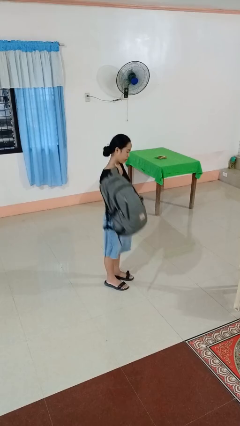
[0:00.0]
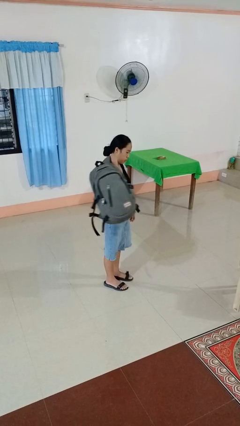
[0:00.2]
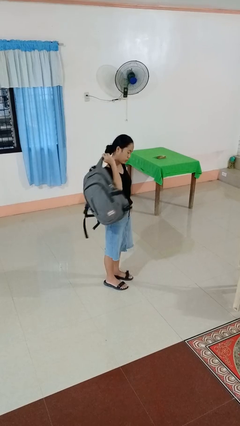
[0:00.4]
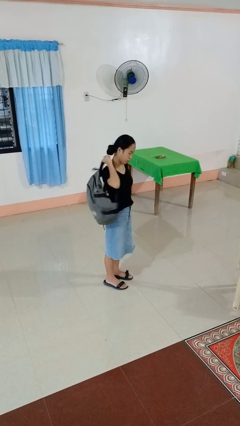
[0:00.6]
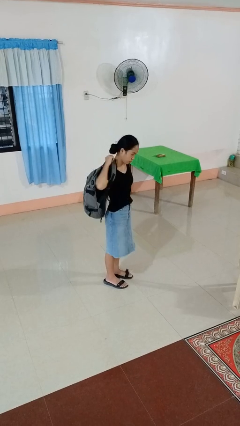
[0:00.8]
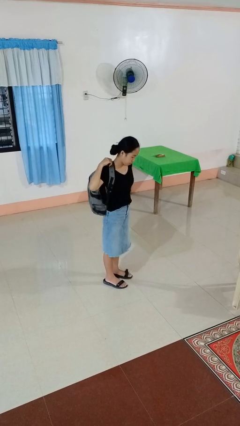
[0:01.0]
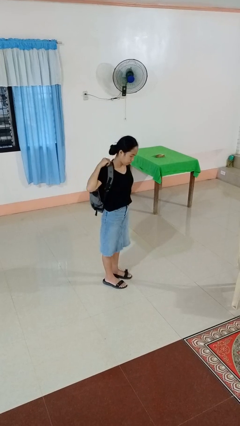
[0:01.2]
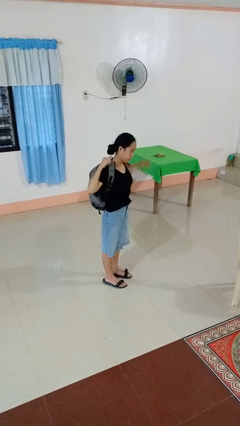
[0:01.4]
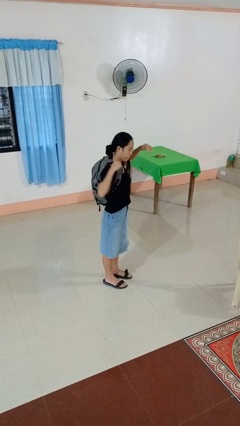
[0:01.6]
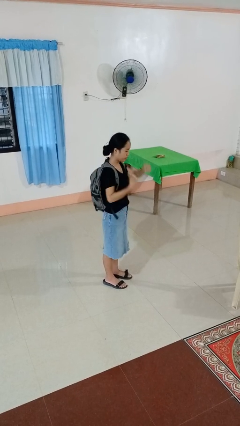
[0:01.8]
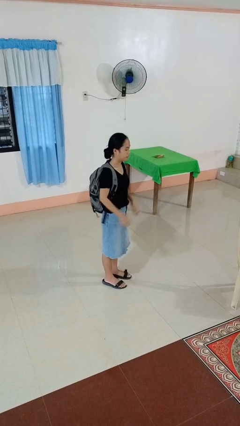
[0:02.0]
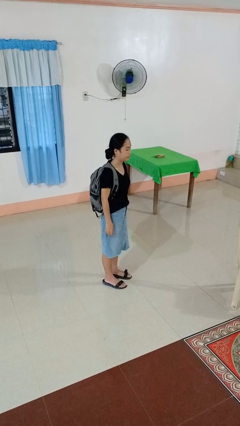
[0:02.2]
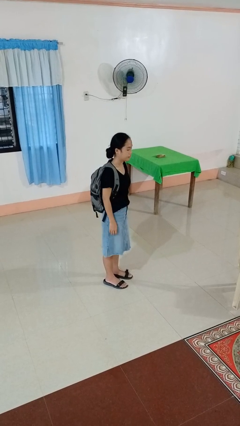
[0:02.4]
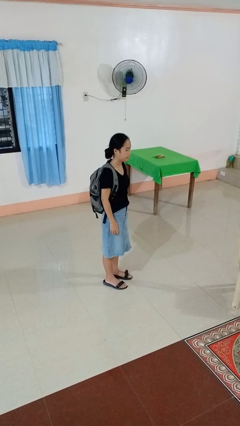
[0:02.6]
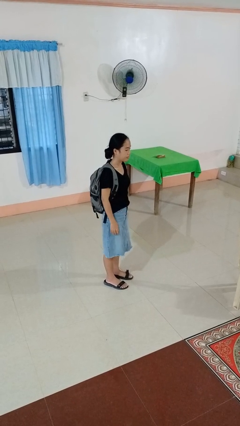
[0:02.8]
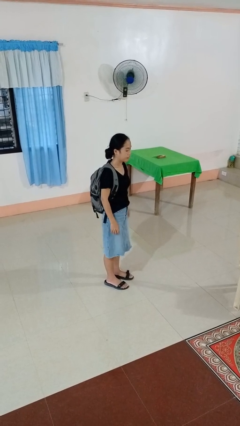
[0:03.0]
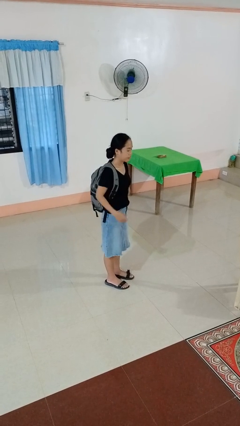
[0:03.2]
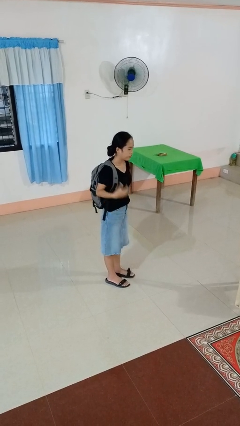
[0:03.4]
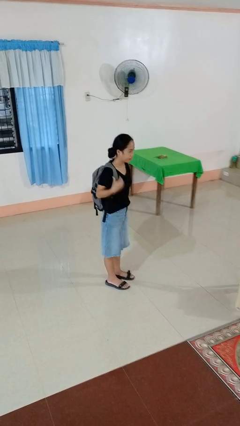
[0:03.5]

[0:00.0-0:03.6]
person puts on backpack

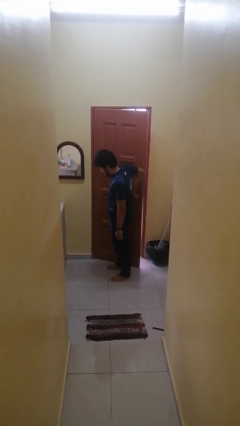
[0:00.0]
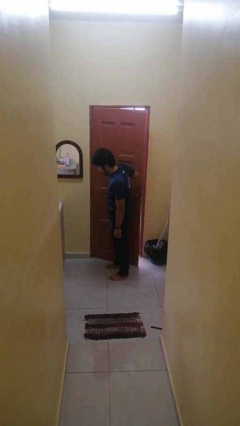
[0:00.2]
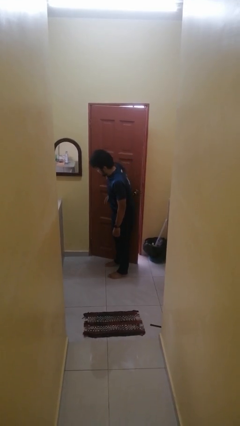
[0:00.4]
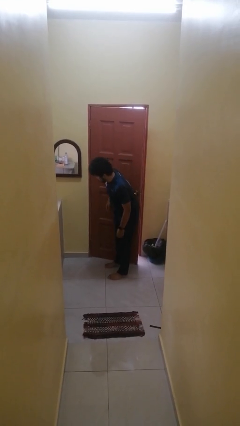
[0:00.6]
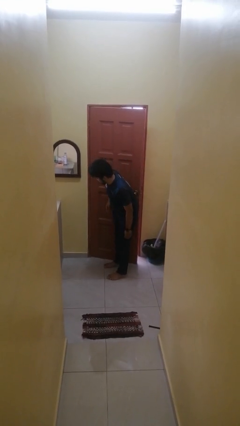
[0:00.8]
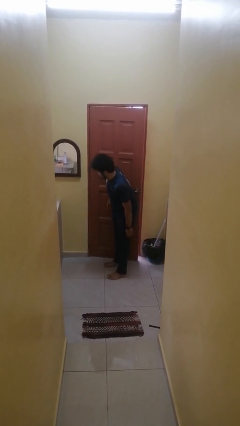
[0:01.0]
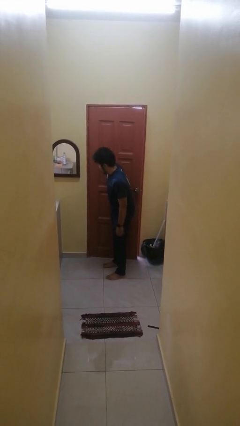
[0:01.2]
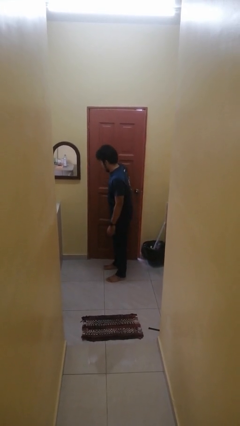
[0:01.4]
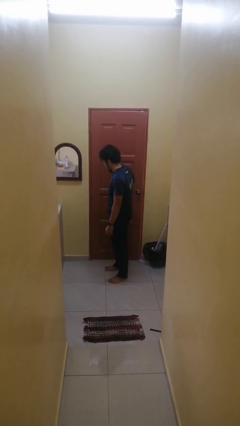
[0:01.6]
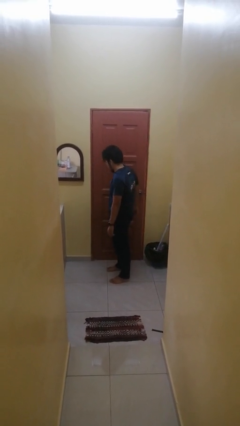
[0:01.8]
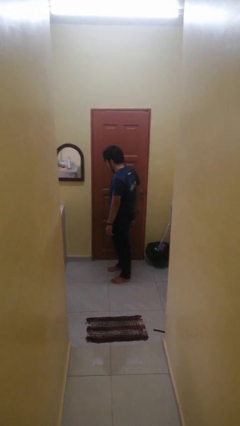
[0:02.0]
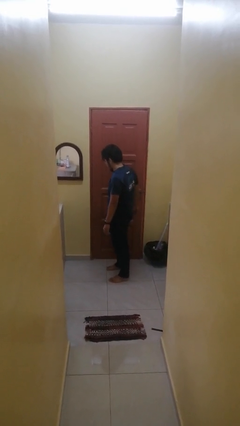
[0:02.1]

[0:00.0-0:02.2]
person closes door with hip

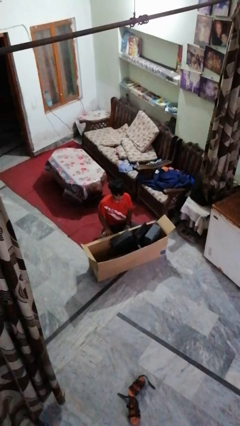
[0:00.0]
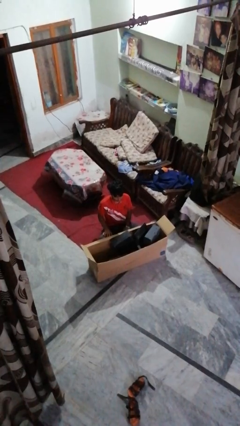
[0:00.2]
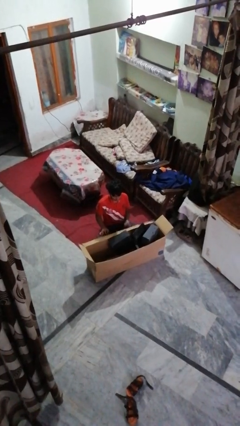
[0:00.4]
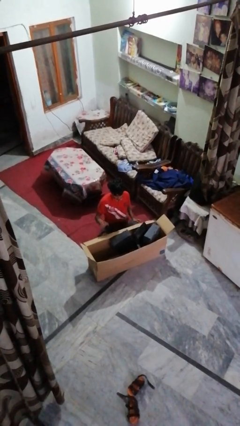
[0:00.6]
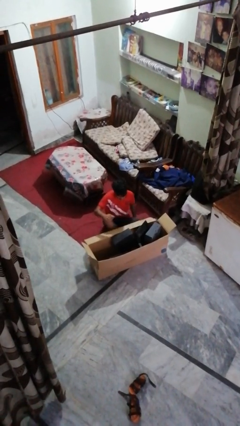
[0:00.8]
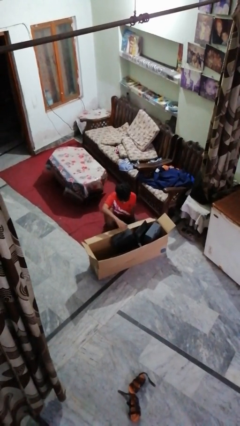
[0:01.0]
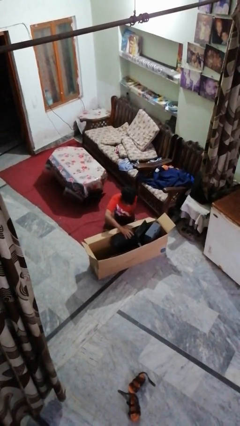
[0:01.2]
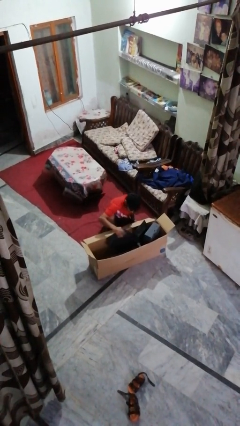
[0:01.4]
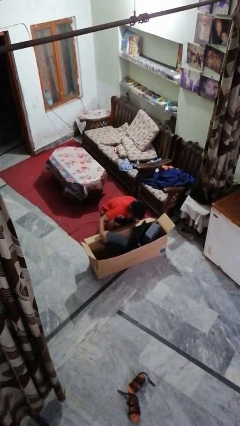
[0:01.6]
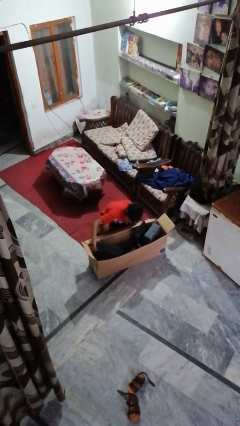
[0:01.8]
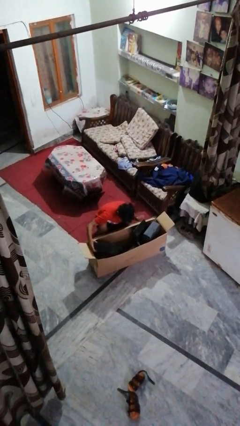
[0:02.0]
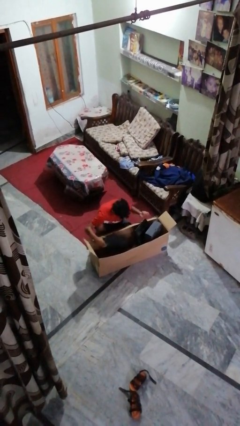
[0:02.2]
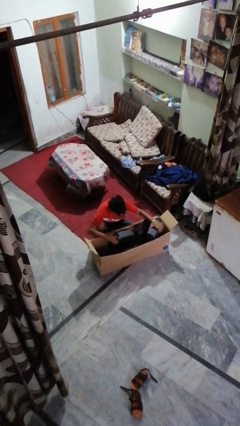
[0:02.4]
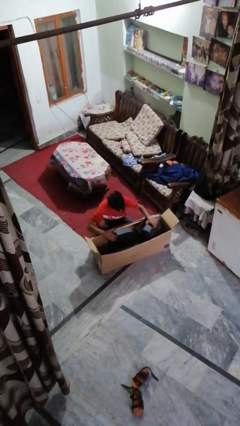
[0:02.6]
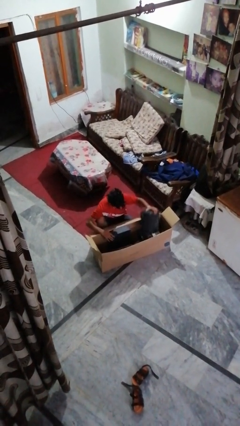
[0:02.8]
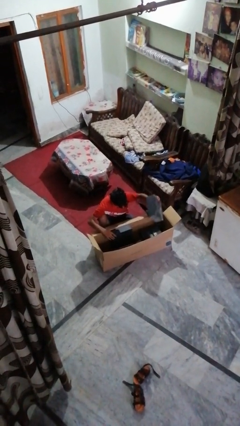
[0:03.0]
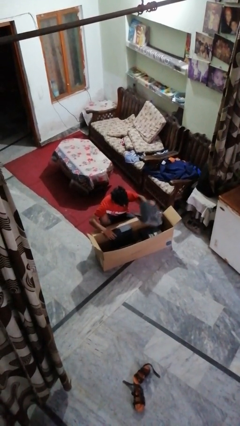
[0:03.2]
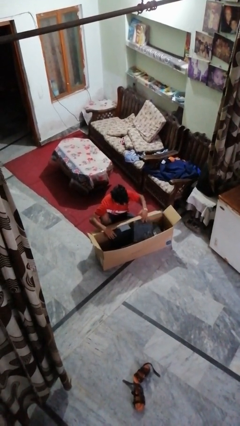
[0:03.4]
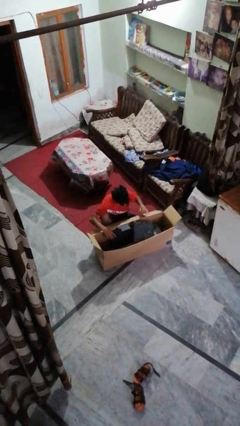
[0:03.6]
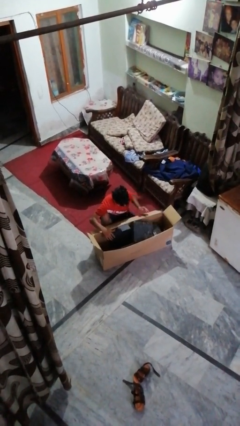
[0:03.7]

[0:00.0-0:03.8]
person searches in box

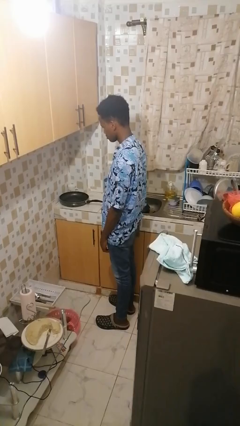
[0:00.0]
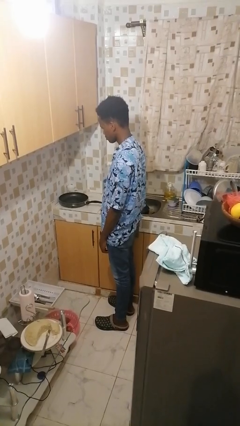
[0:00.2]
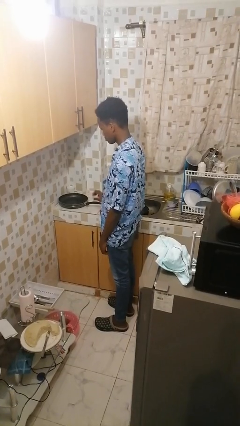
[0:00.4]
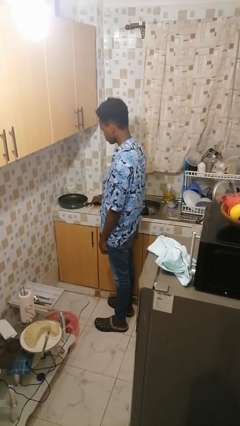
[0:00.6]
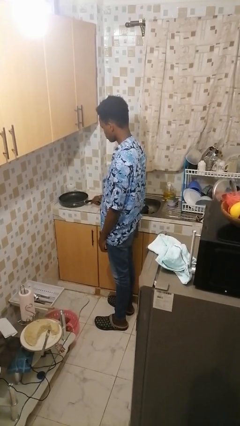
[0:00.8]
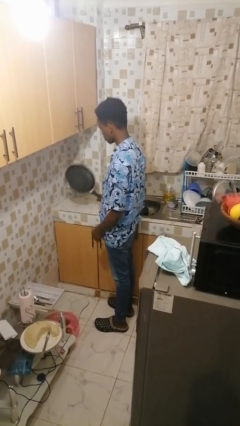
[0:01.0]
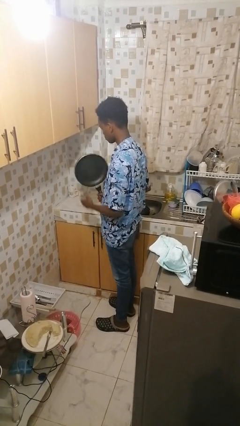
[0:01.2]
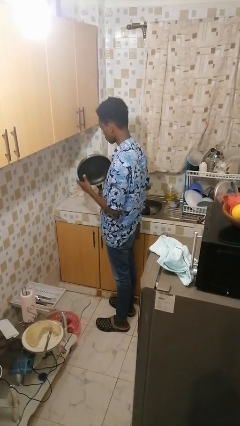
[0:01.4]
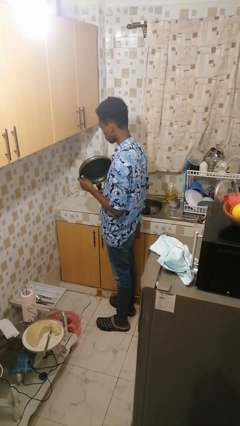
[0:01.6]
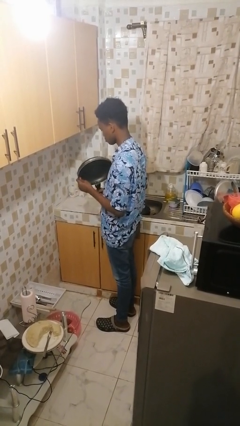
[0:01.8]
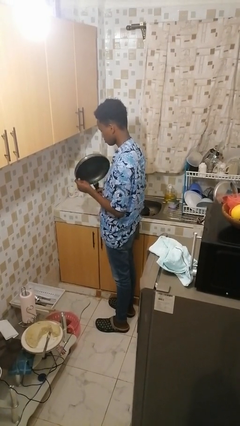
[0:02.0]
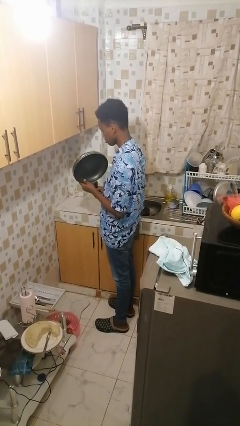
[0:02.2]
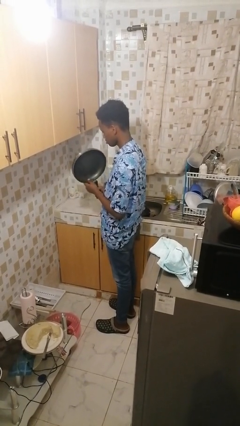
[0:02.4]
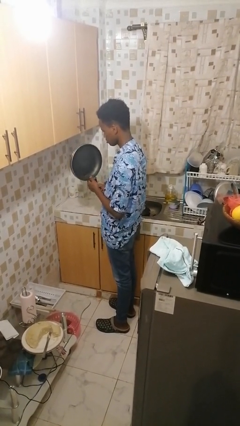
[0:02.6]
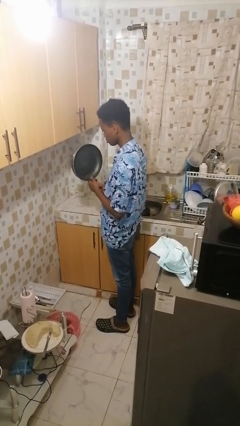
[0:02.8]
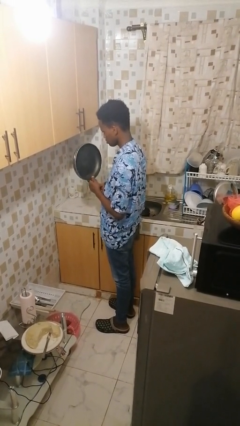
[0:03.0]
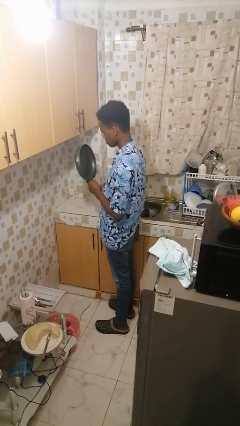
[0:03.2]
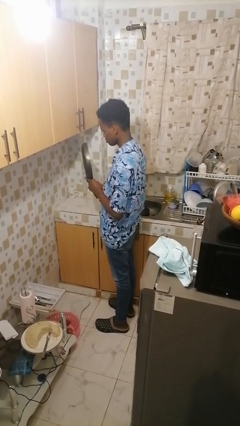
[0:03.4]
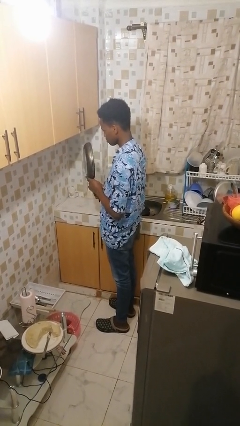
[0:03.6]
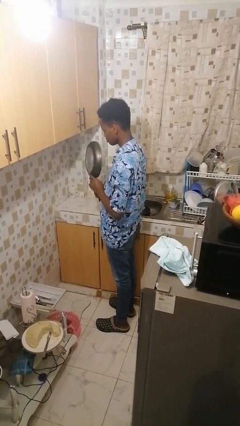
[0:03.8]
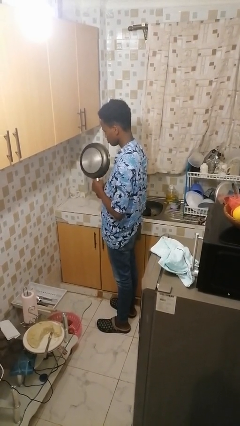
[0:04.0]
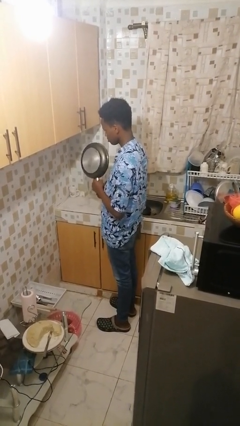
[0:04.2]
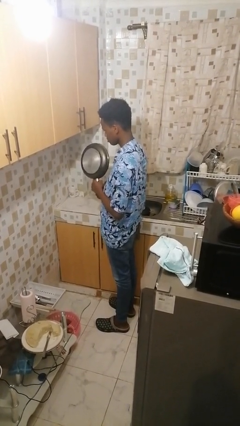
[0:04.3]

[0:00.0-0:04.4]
person picks up object from countertop

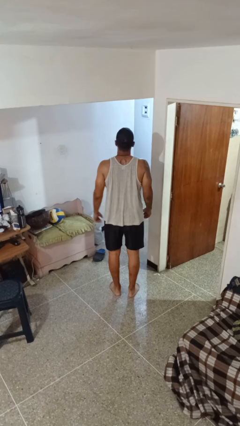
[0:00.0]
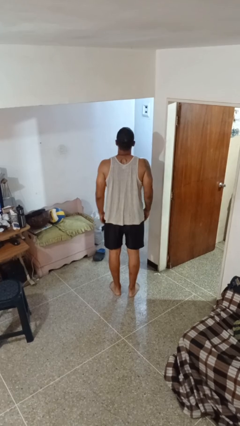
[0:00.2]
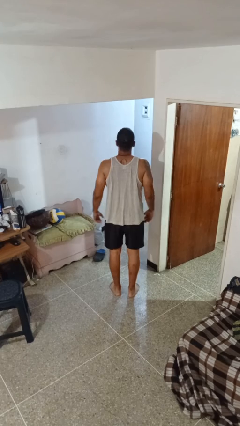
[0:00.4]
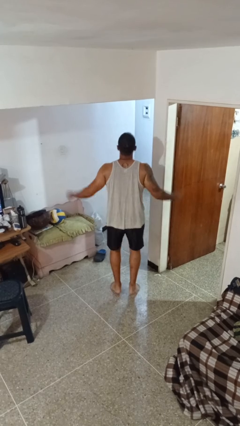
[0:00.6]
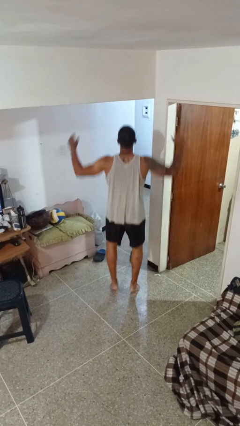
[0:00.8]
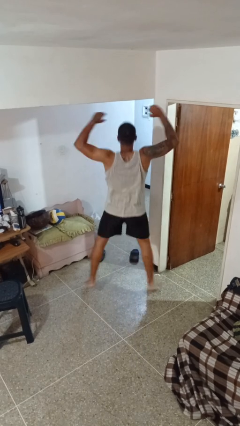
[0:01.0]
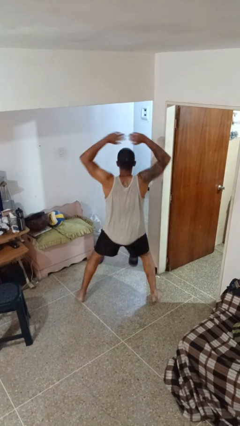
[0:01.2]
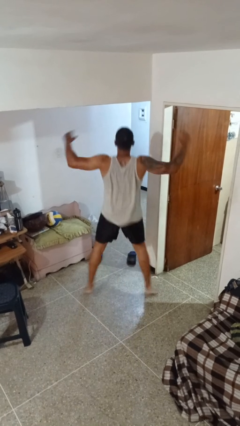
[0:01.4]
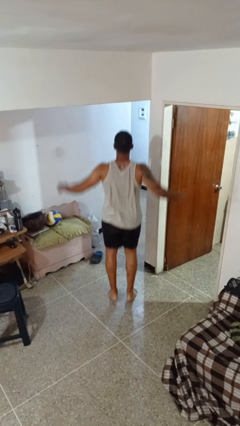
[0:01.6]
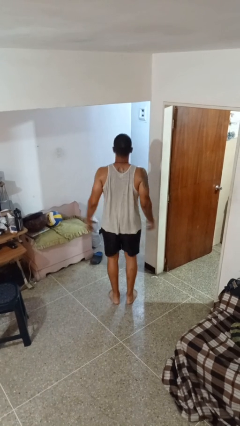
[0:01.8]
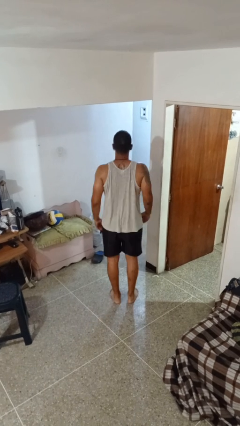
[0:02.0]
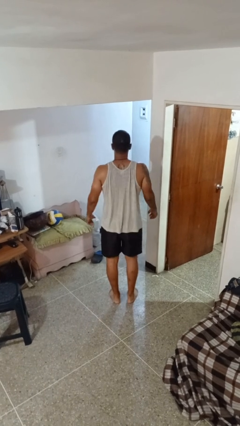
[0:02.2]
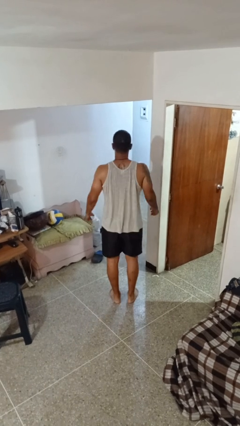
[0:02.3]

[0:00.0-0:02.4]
person exercises with jumping jacks

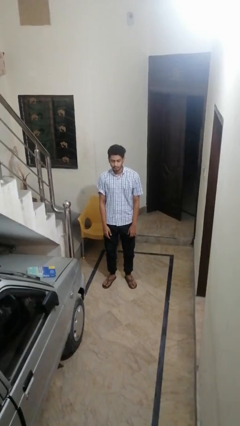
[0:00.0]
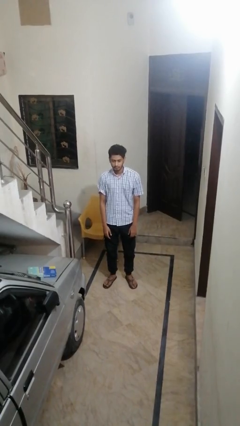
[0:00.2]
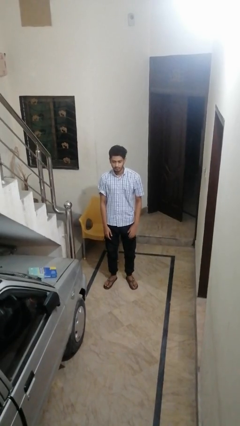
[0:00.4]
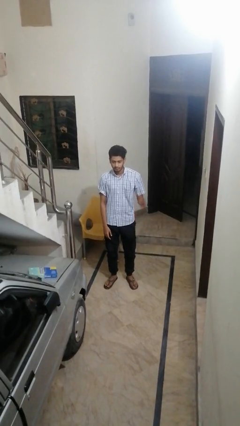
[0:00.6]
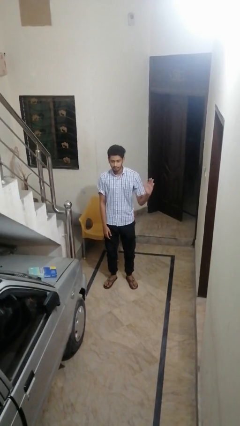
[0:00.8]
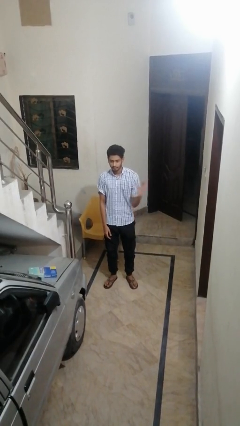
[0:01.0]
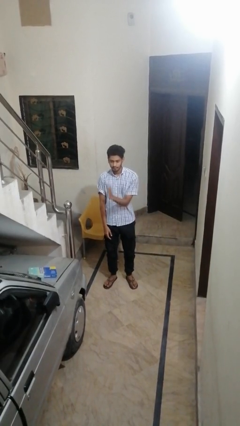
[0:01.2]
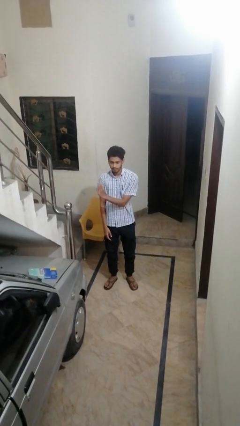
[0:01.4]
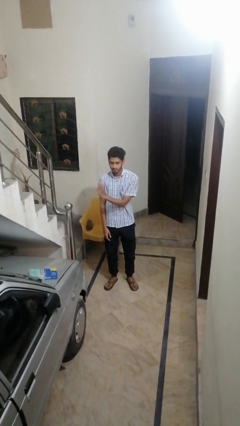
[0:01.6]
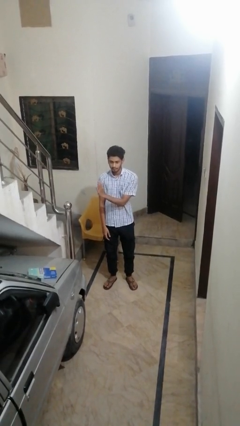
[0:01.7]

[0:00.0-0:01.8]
person gestures swipe right
